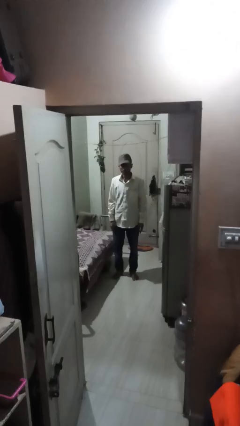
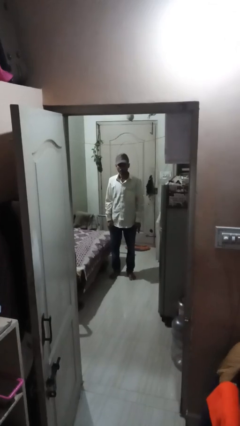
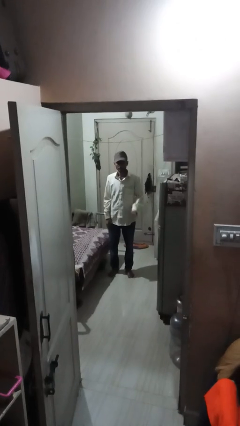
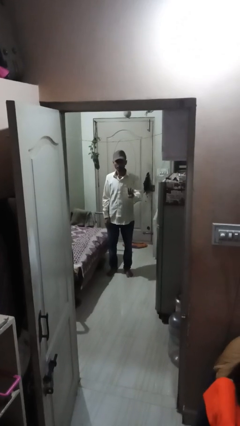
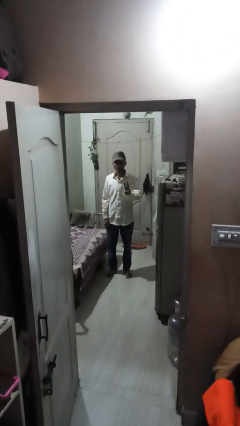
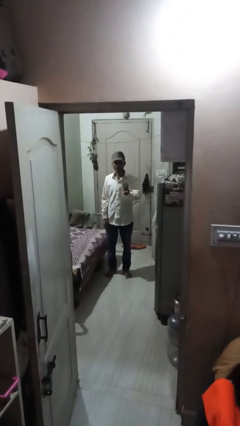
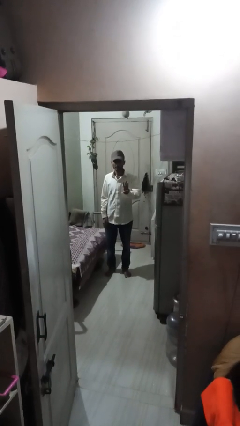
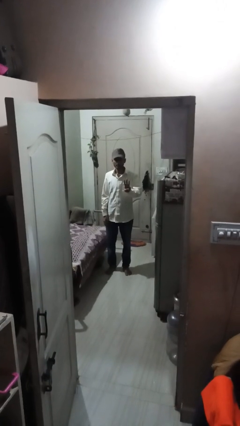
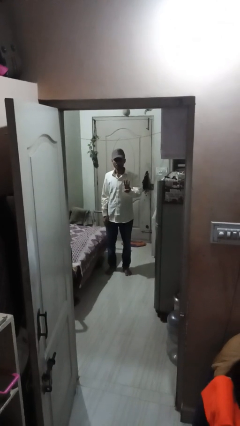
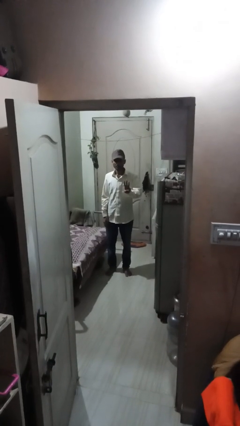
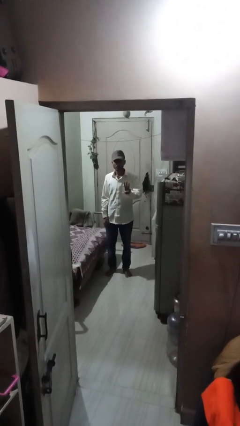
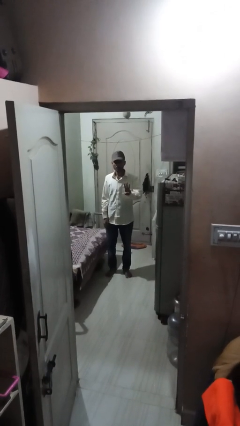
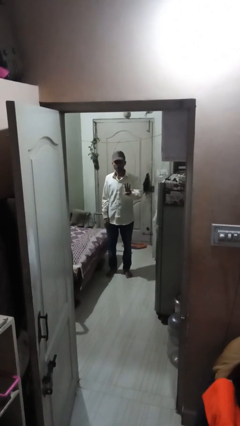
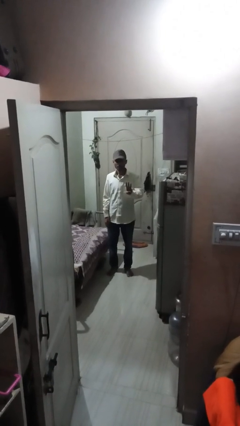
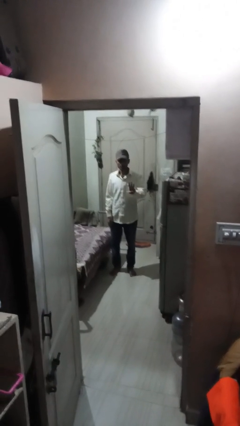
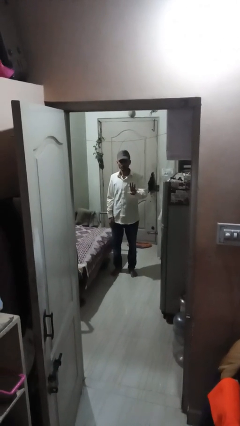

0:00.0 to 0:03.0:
person gestures number three

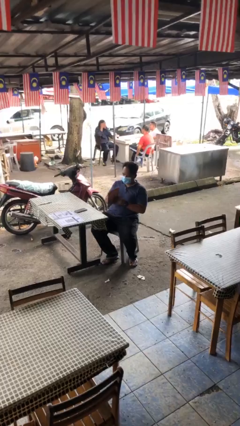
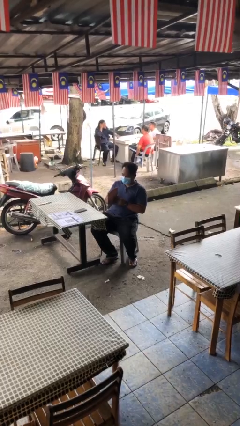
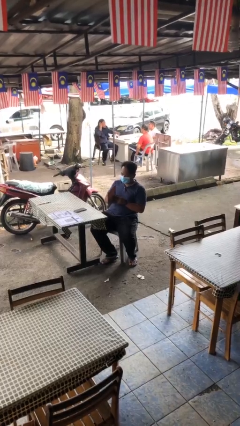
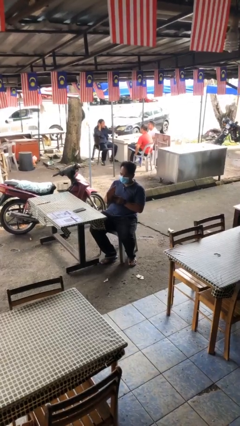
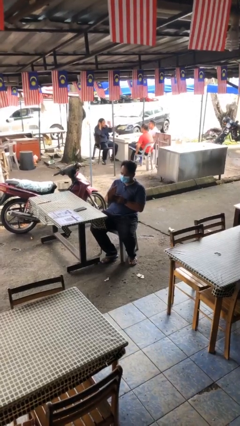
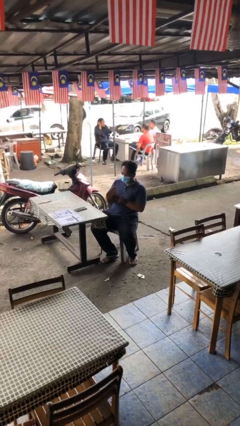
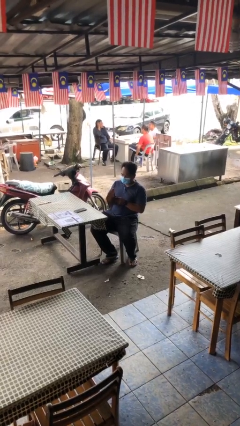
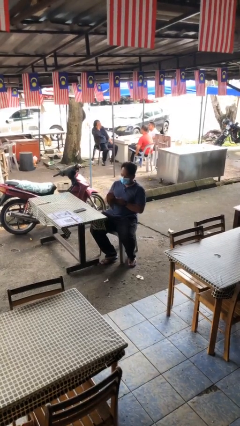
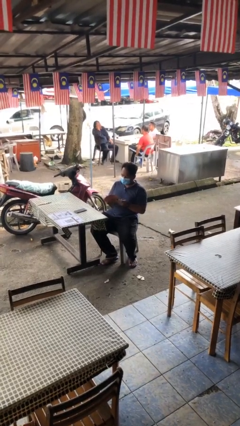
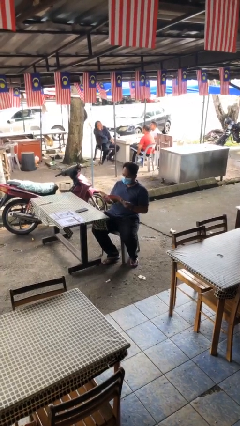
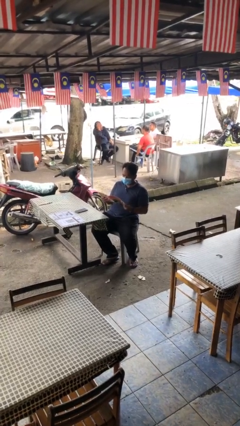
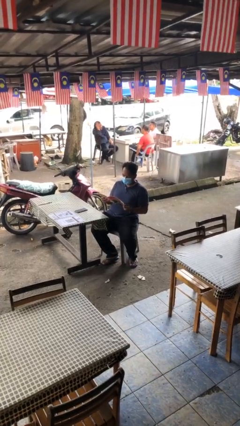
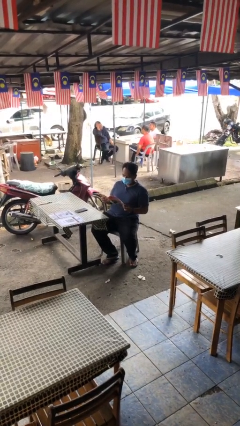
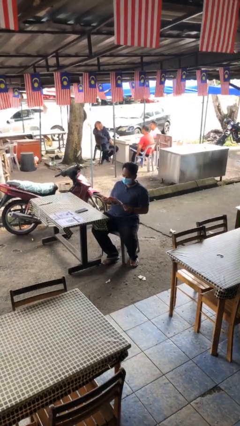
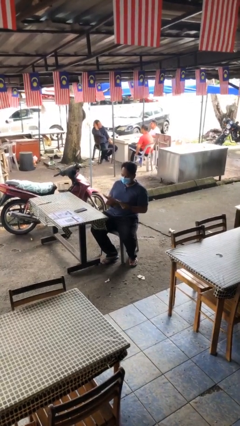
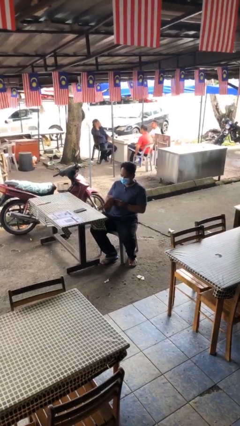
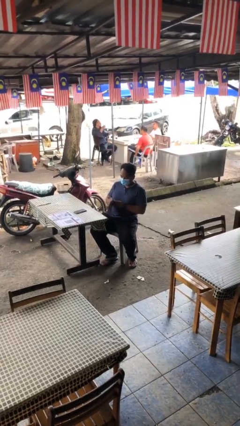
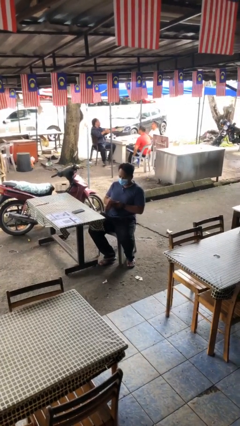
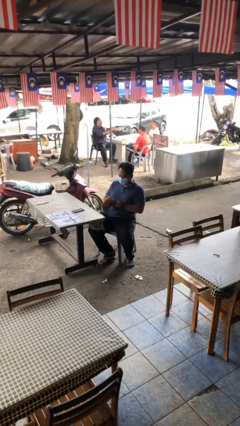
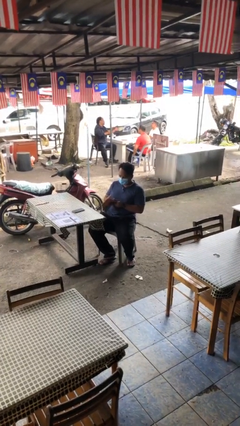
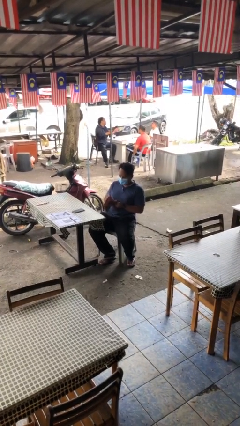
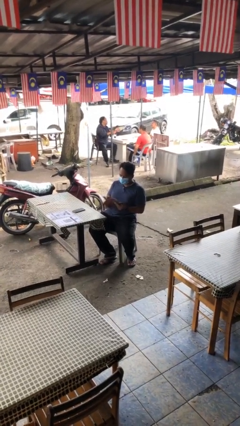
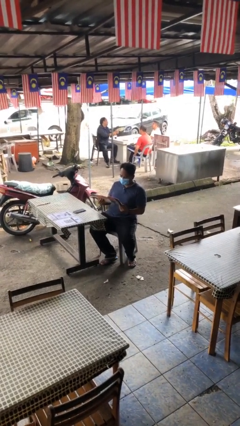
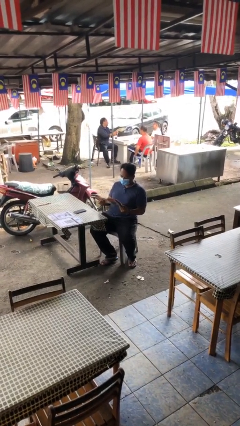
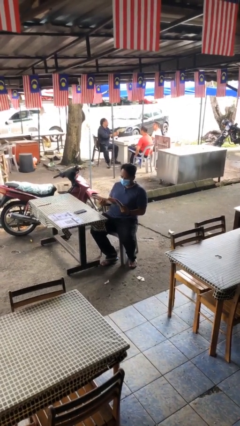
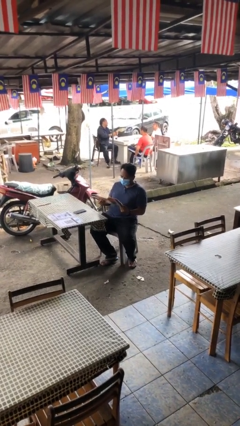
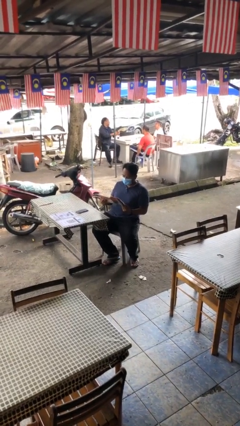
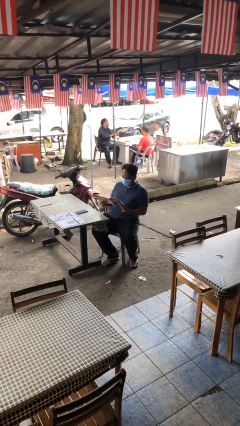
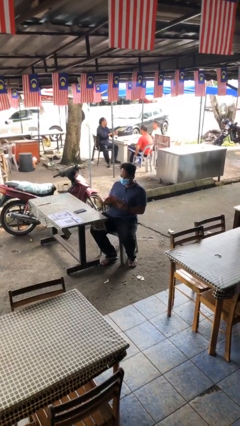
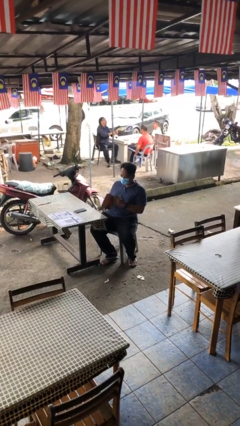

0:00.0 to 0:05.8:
person reads document

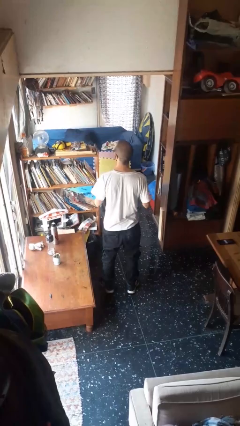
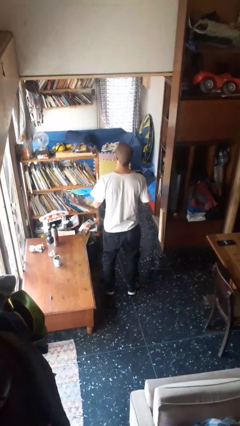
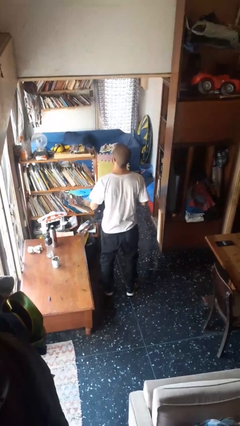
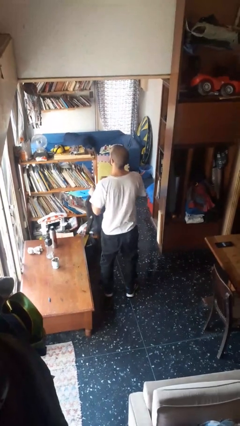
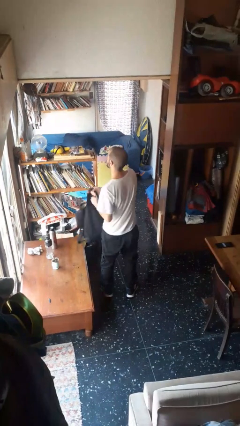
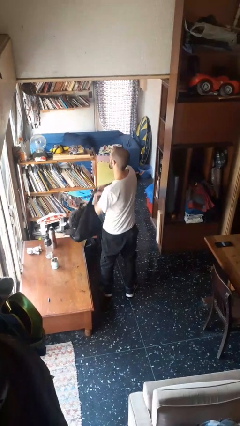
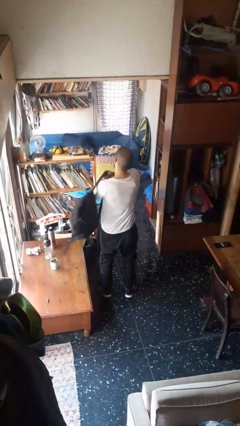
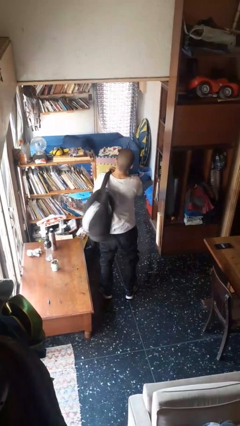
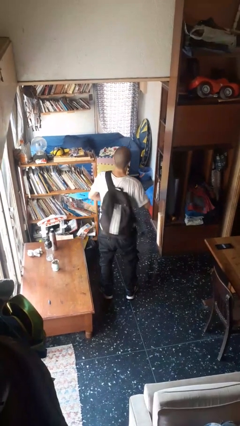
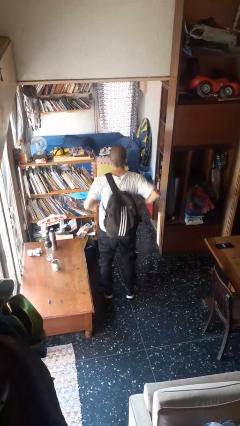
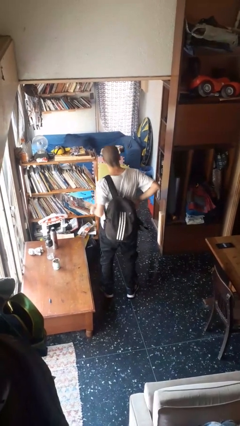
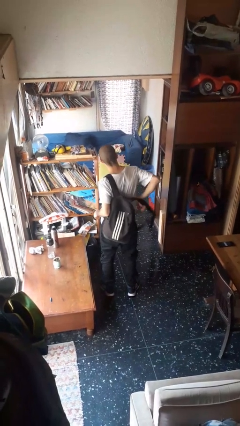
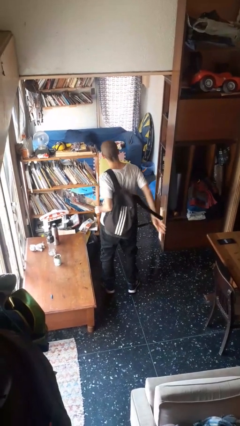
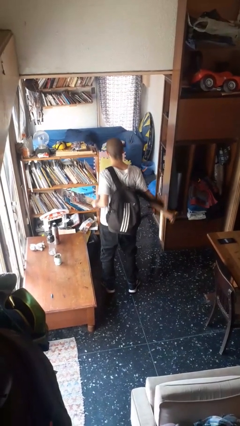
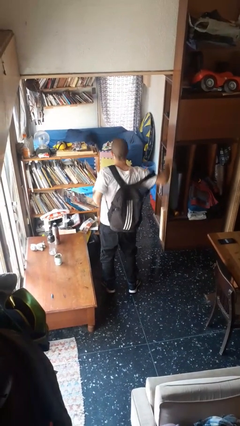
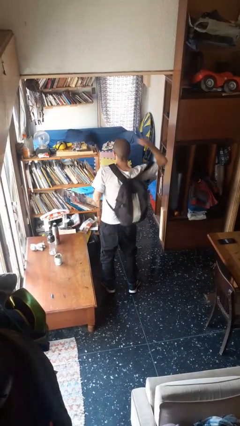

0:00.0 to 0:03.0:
person puts on backpack

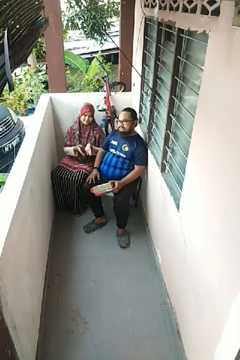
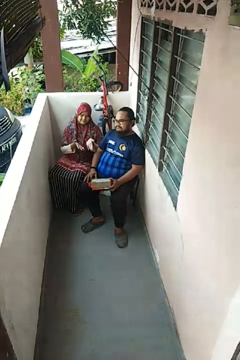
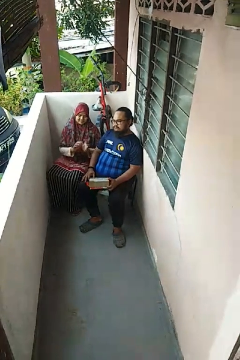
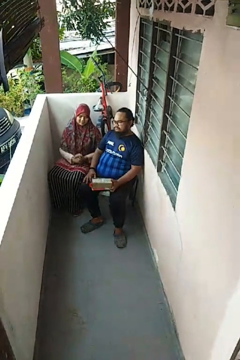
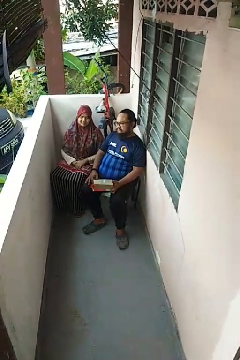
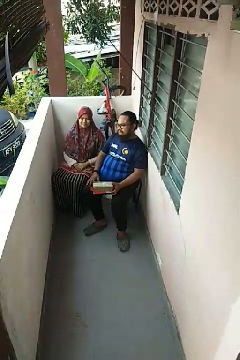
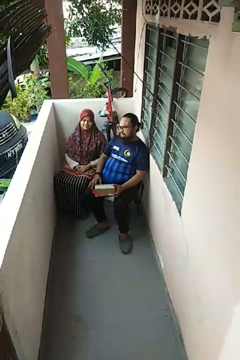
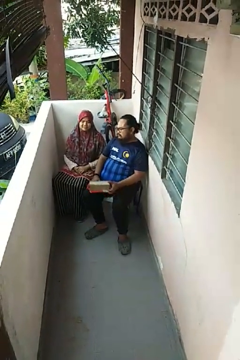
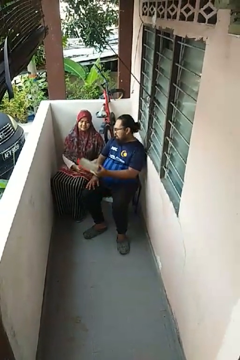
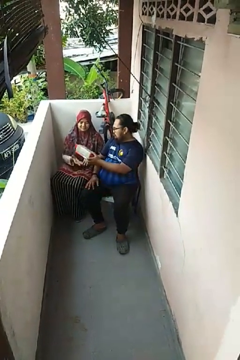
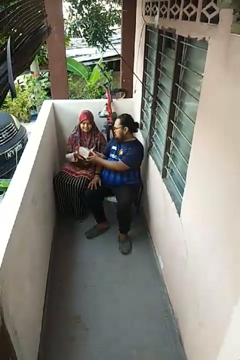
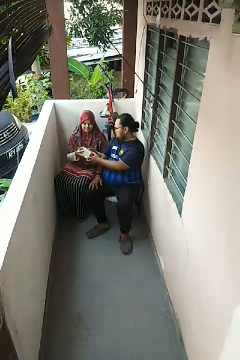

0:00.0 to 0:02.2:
person transfers object to person

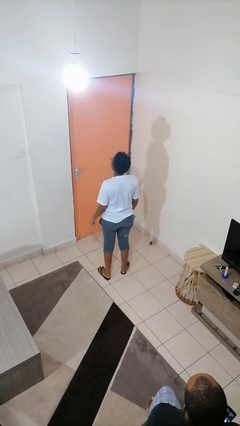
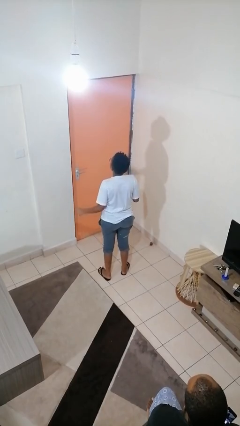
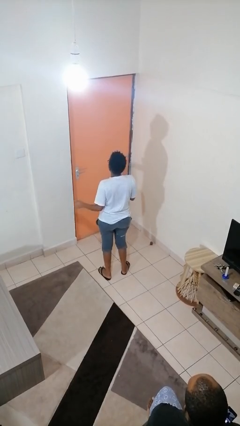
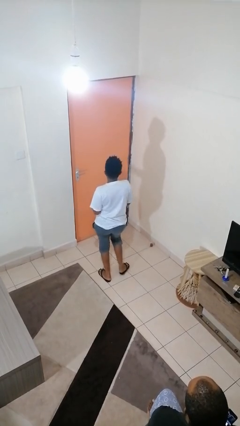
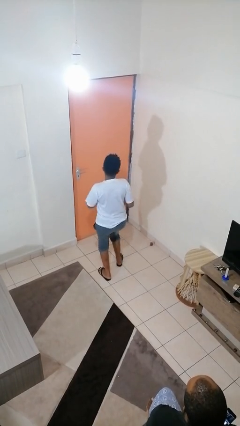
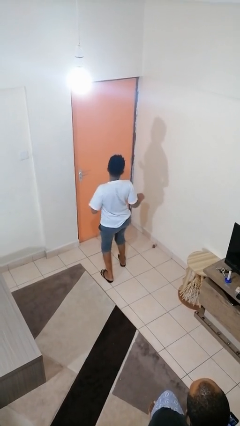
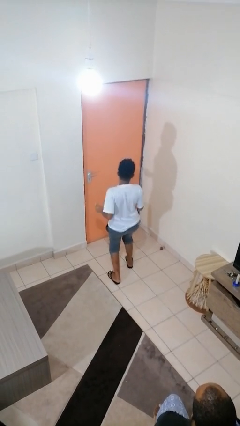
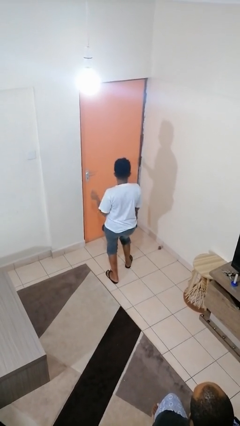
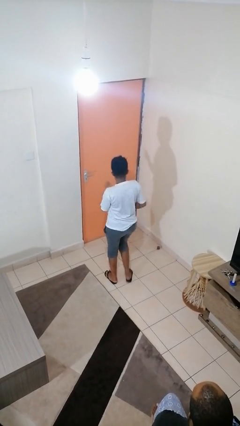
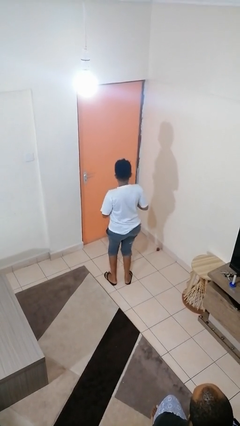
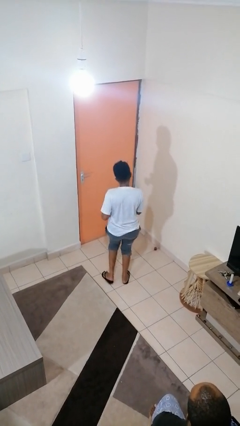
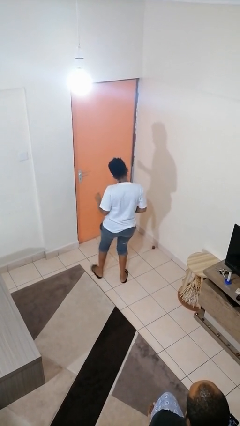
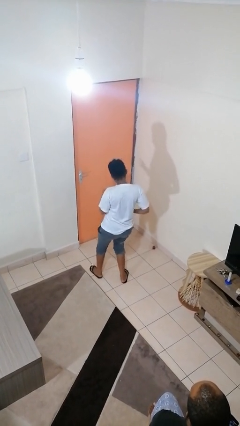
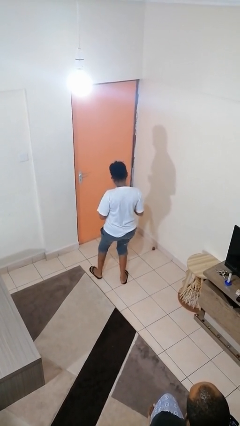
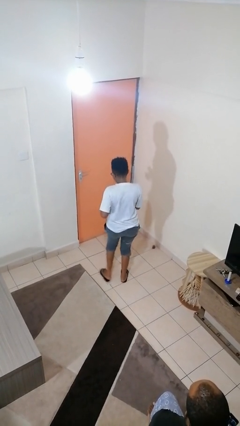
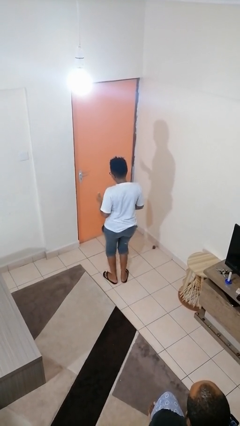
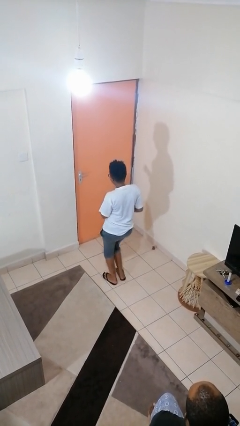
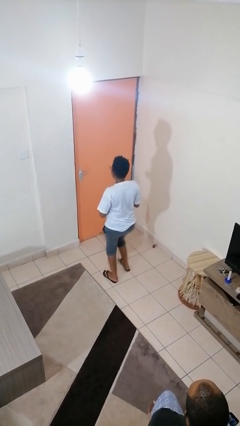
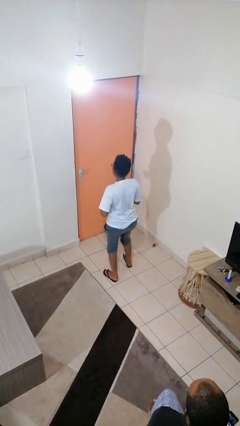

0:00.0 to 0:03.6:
person dances in place
